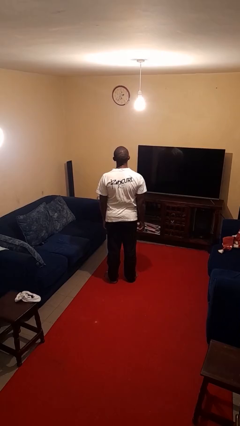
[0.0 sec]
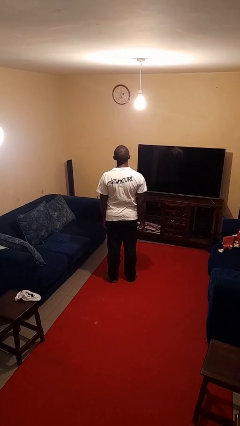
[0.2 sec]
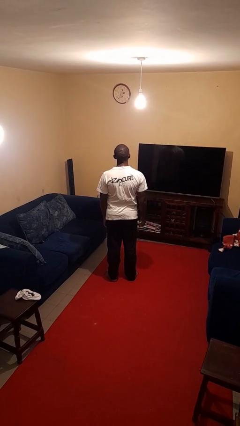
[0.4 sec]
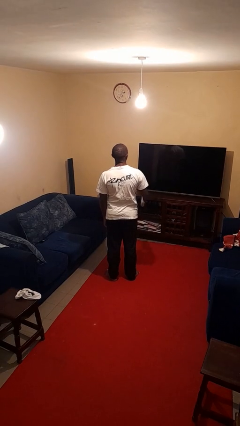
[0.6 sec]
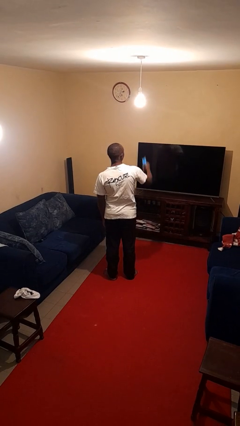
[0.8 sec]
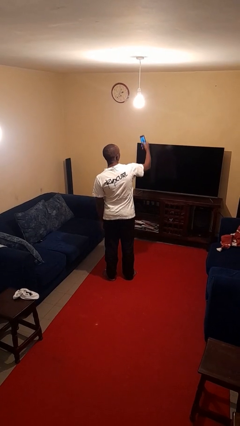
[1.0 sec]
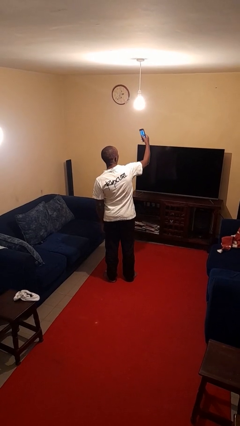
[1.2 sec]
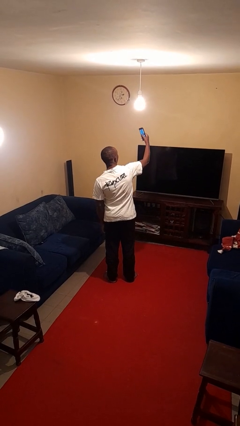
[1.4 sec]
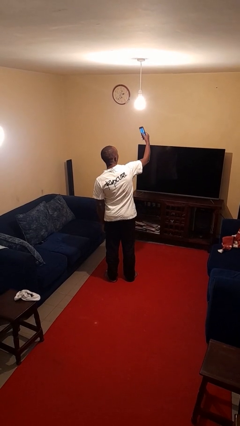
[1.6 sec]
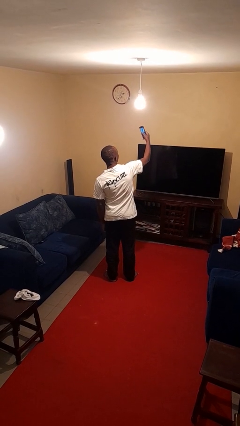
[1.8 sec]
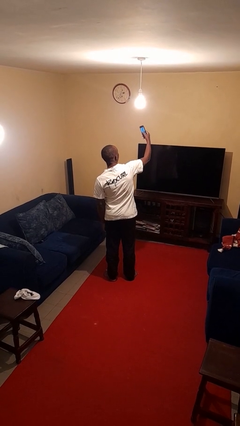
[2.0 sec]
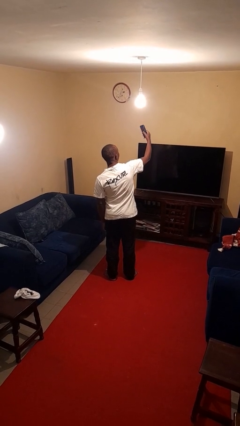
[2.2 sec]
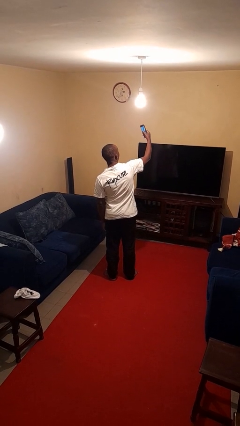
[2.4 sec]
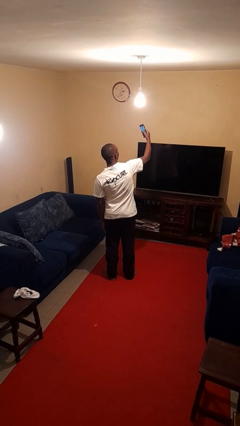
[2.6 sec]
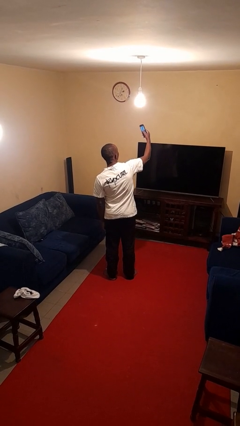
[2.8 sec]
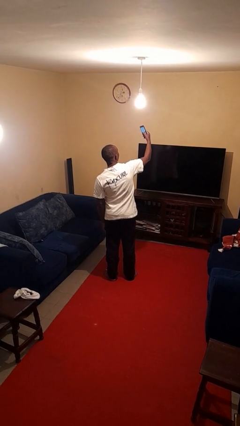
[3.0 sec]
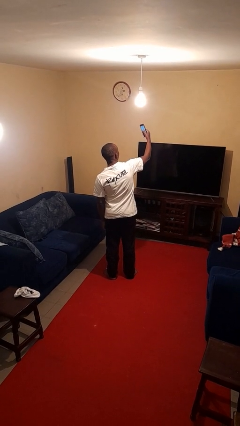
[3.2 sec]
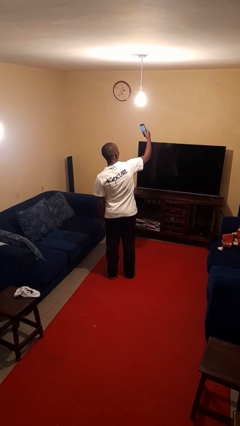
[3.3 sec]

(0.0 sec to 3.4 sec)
person takes selfie

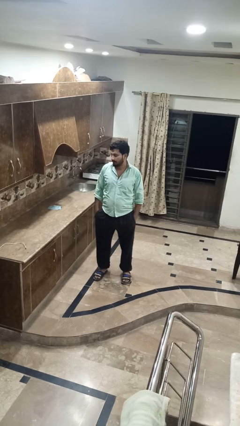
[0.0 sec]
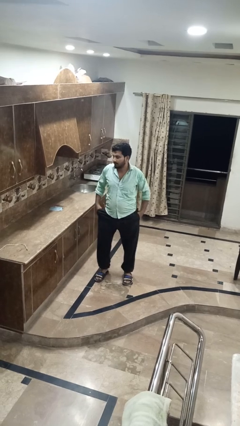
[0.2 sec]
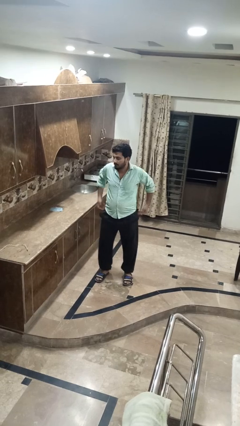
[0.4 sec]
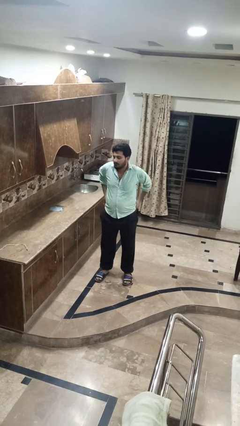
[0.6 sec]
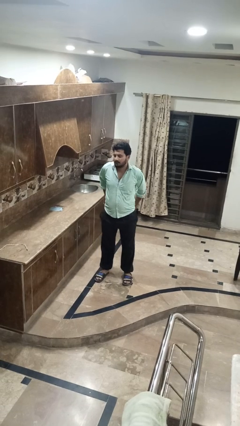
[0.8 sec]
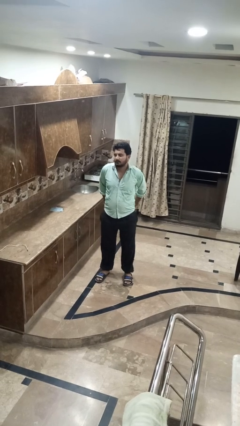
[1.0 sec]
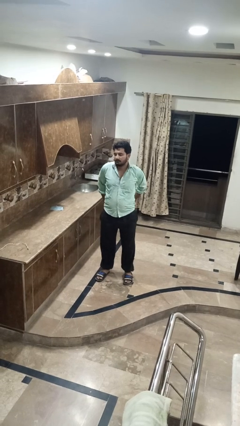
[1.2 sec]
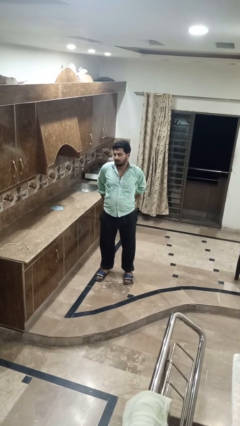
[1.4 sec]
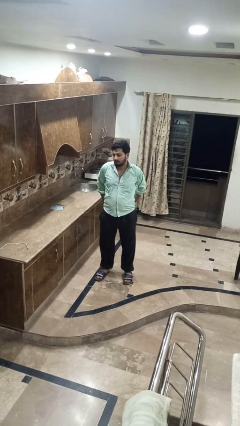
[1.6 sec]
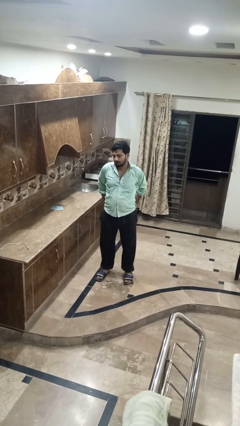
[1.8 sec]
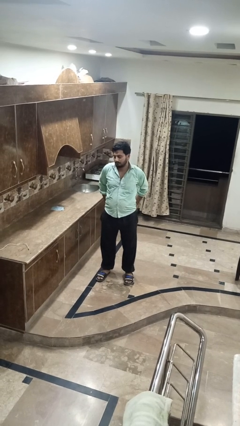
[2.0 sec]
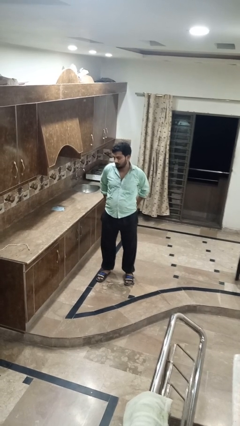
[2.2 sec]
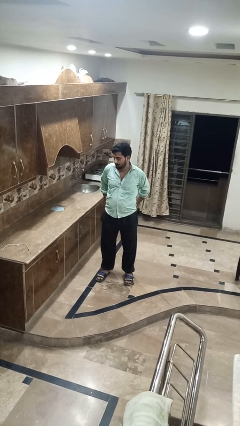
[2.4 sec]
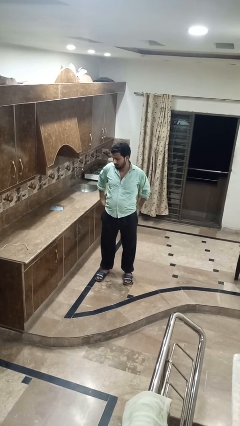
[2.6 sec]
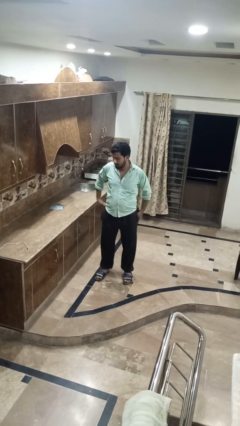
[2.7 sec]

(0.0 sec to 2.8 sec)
person puts hands in back pockets

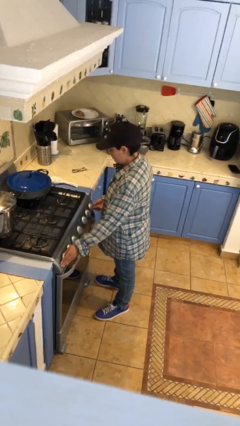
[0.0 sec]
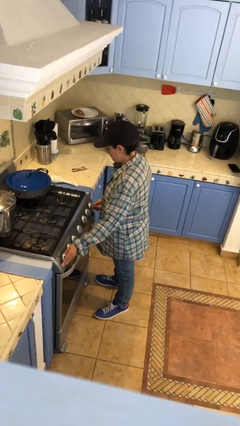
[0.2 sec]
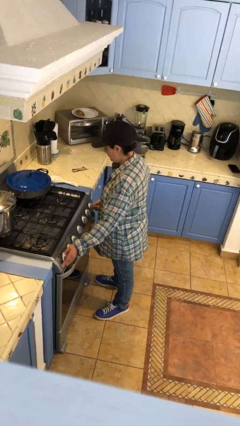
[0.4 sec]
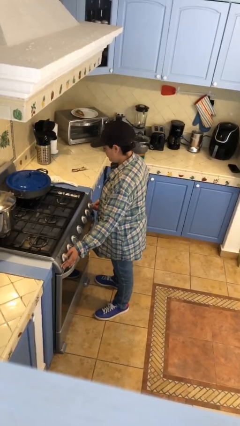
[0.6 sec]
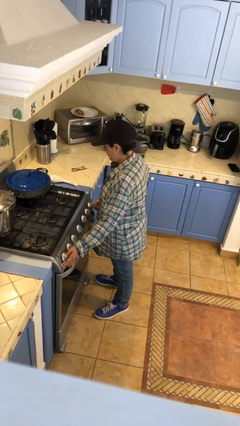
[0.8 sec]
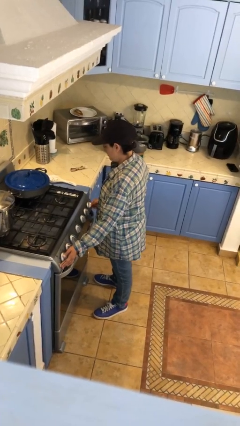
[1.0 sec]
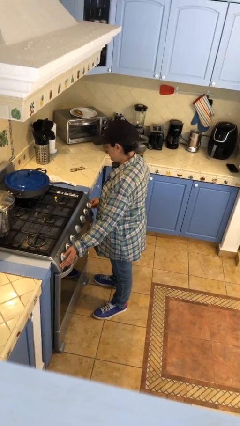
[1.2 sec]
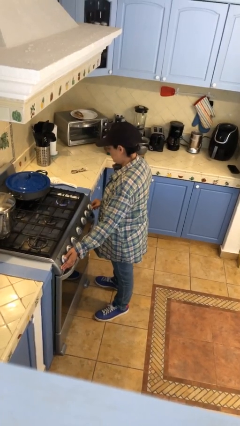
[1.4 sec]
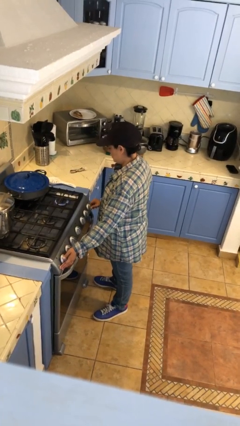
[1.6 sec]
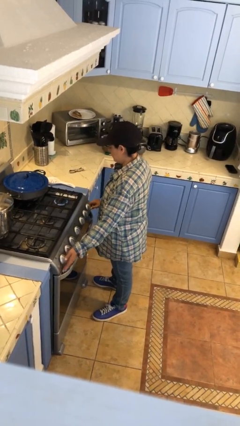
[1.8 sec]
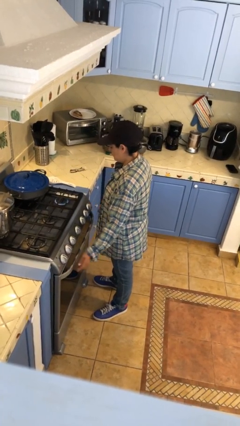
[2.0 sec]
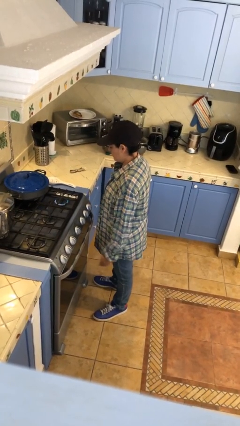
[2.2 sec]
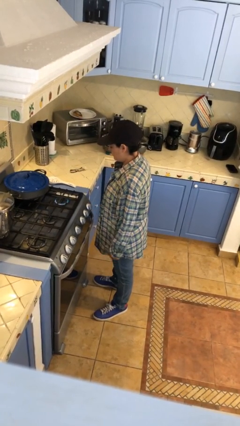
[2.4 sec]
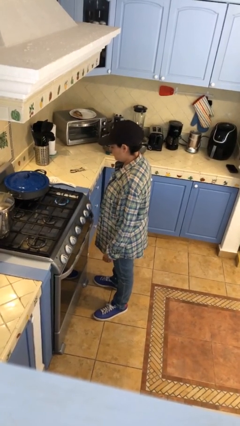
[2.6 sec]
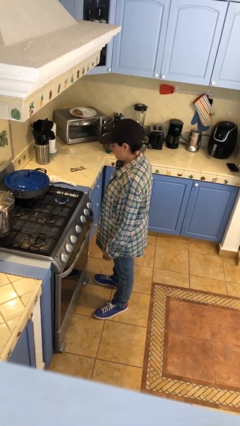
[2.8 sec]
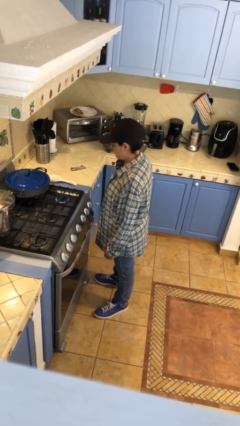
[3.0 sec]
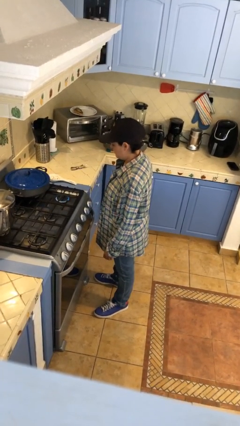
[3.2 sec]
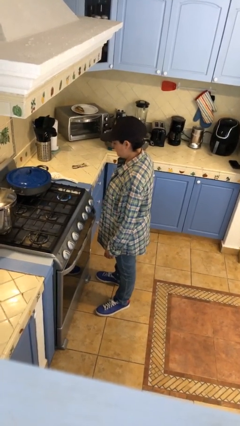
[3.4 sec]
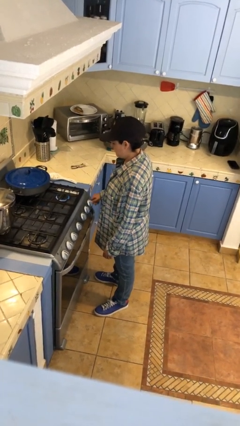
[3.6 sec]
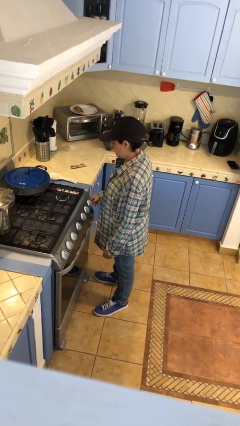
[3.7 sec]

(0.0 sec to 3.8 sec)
person turns on stovetop

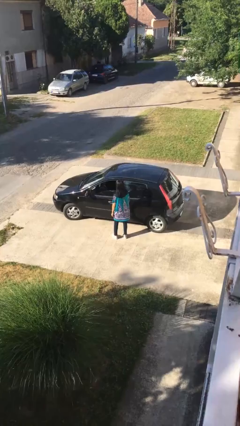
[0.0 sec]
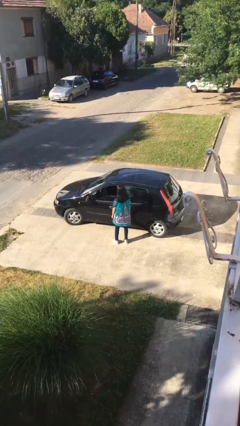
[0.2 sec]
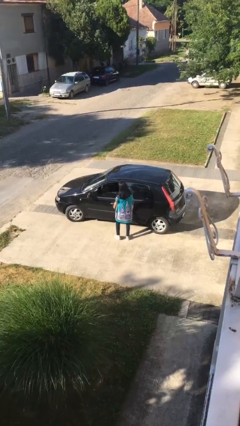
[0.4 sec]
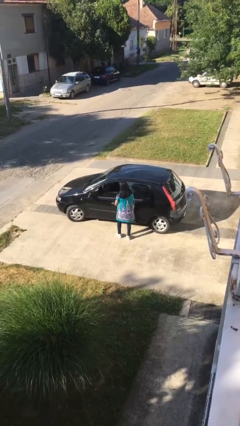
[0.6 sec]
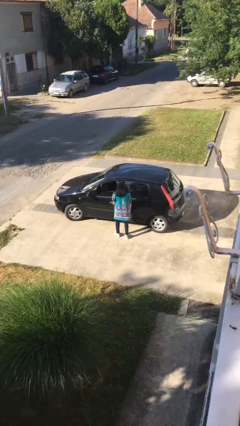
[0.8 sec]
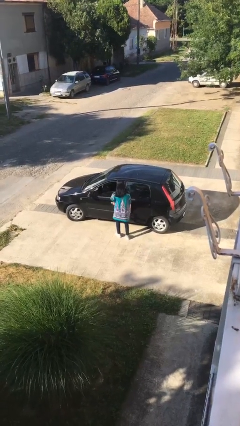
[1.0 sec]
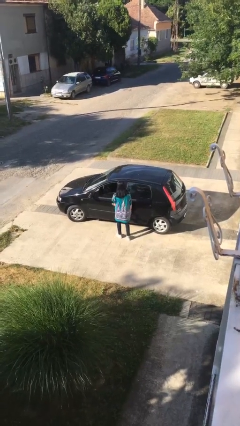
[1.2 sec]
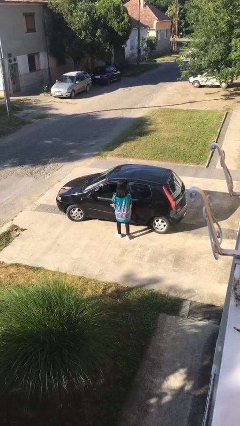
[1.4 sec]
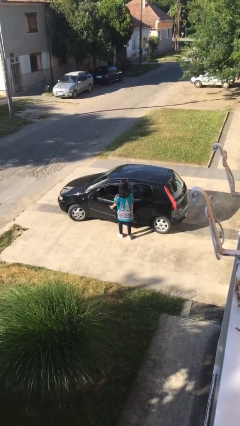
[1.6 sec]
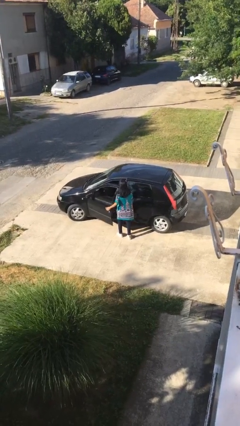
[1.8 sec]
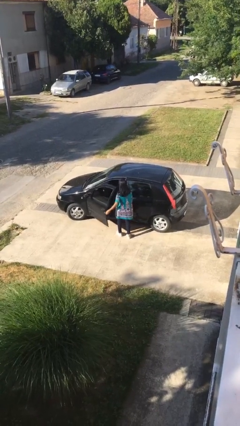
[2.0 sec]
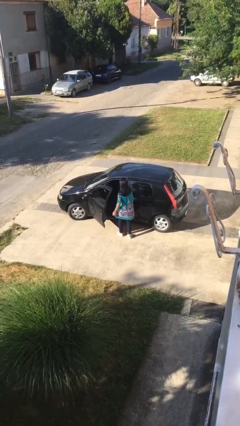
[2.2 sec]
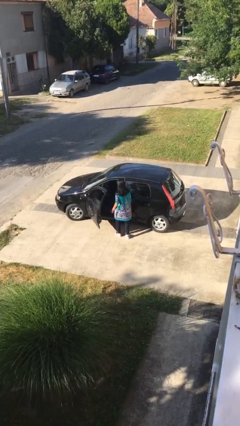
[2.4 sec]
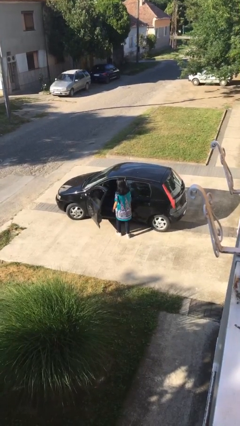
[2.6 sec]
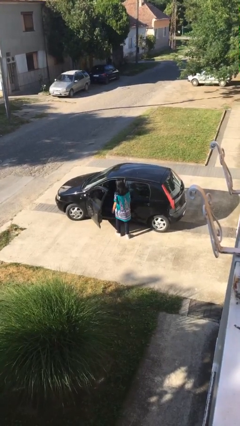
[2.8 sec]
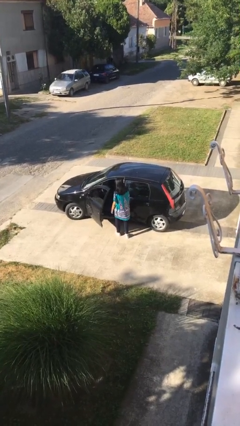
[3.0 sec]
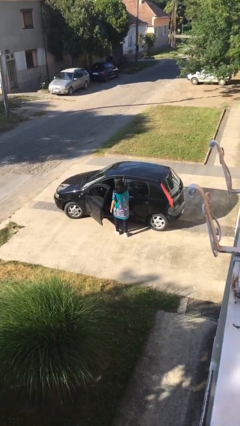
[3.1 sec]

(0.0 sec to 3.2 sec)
person opens car door

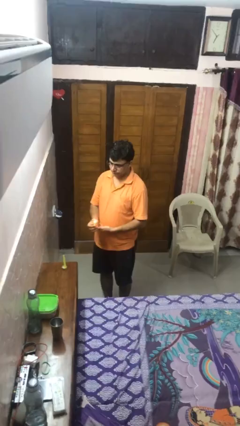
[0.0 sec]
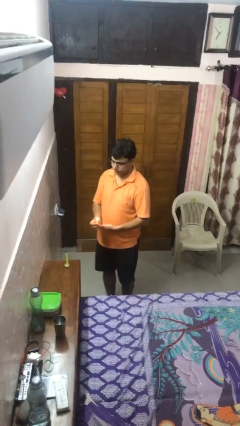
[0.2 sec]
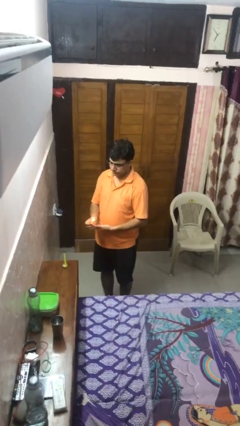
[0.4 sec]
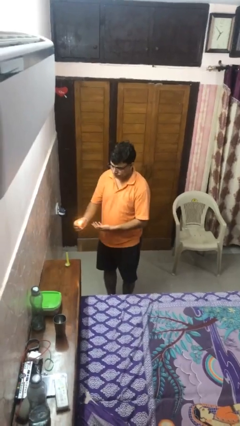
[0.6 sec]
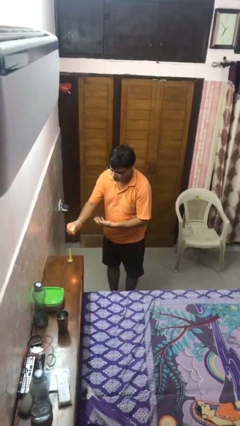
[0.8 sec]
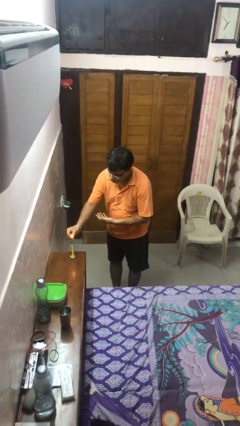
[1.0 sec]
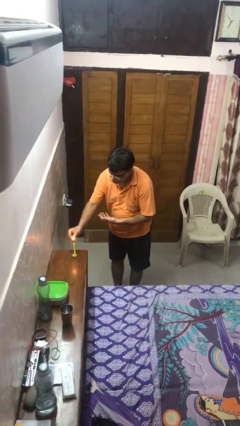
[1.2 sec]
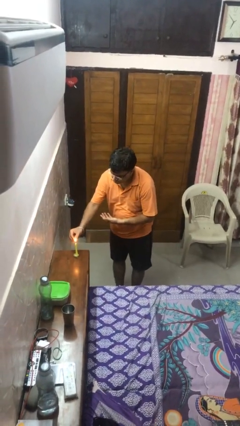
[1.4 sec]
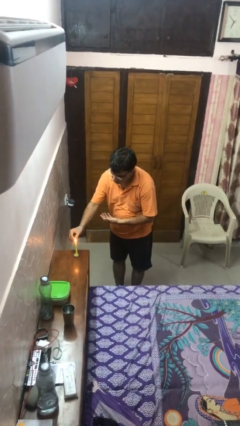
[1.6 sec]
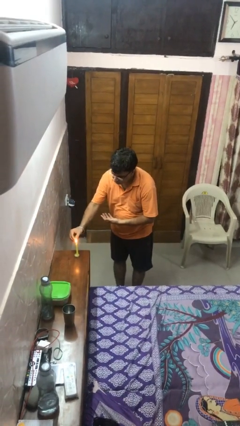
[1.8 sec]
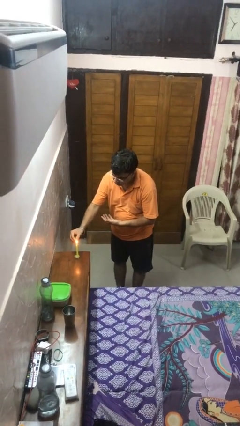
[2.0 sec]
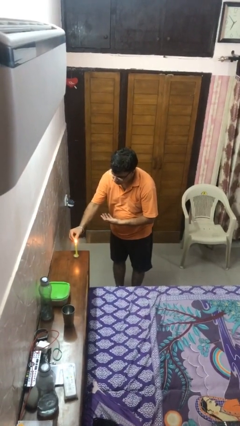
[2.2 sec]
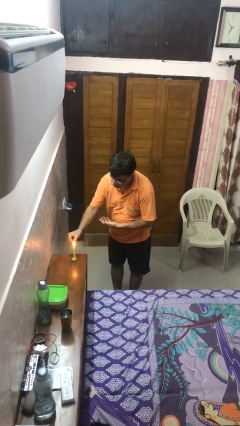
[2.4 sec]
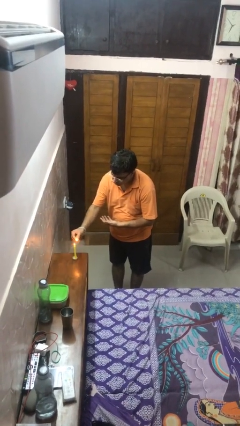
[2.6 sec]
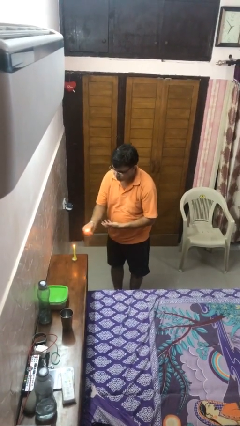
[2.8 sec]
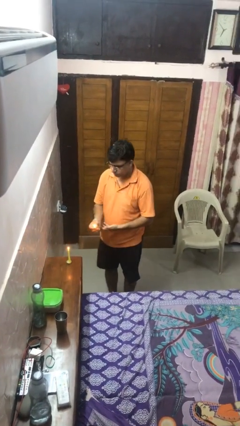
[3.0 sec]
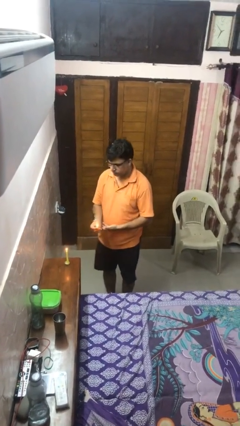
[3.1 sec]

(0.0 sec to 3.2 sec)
person lights candle

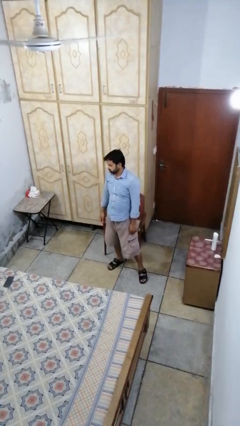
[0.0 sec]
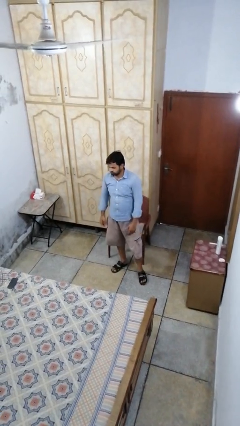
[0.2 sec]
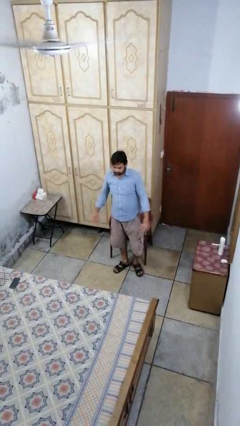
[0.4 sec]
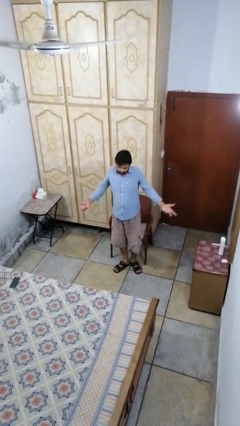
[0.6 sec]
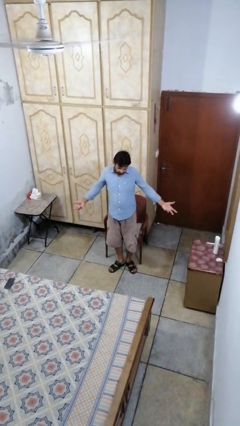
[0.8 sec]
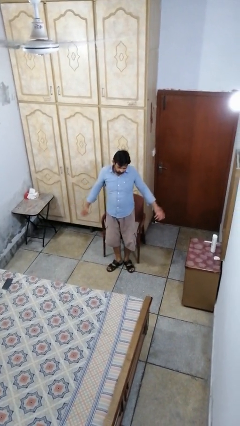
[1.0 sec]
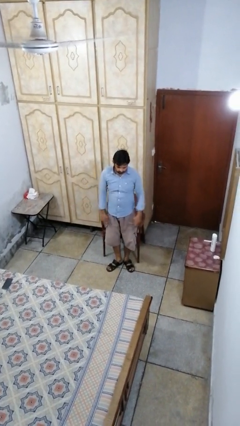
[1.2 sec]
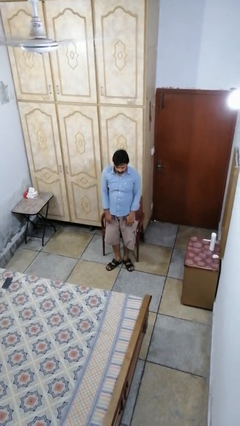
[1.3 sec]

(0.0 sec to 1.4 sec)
person shrugs
